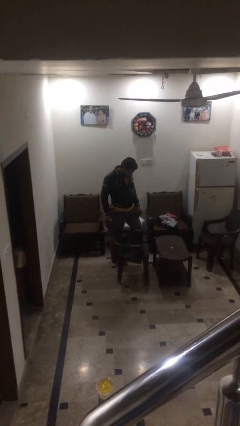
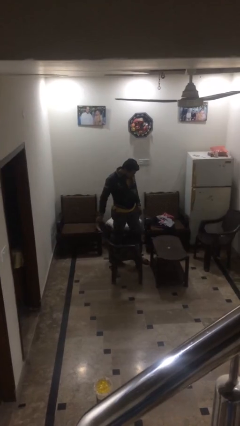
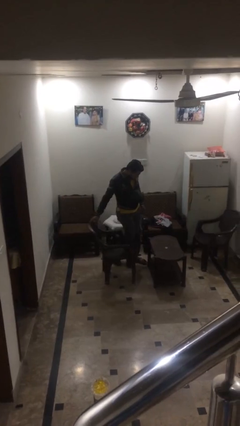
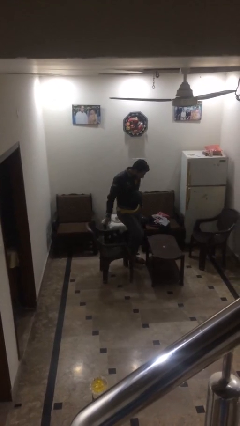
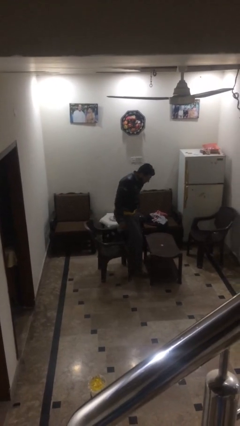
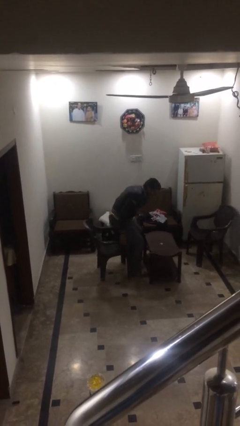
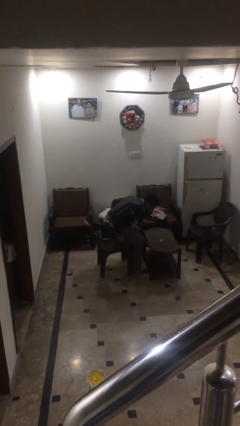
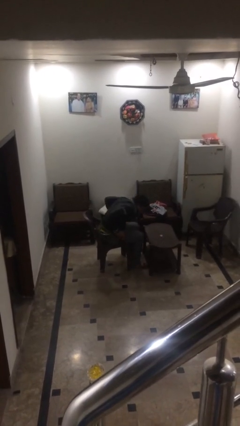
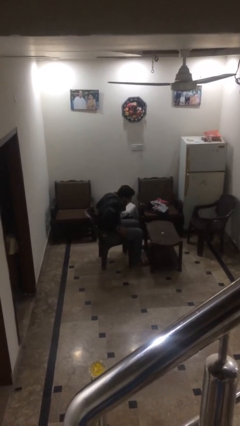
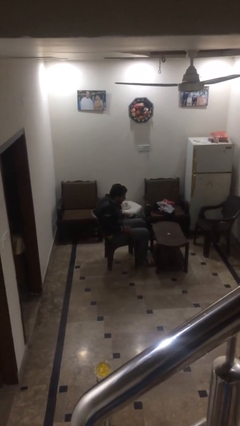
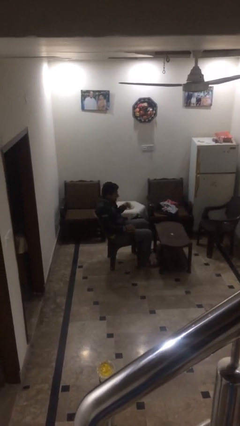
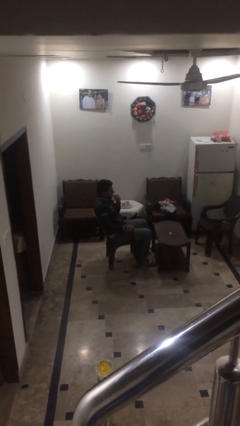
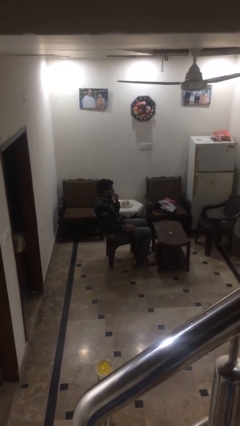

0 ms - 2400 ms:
person sits down

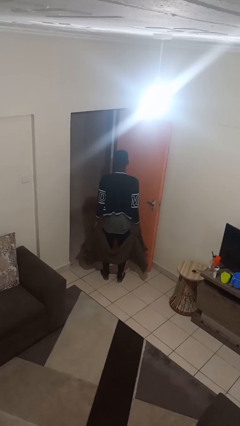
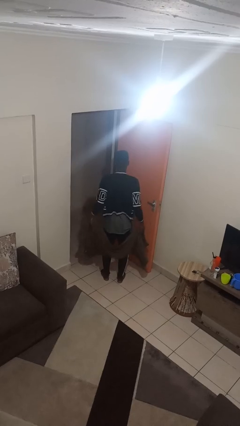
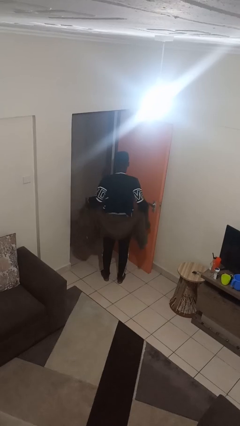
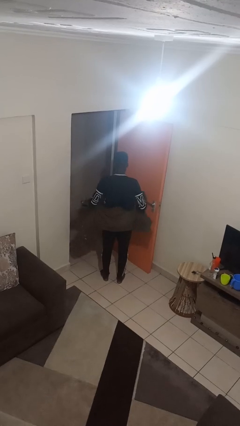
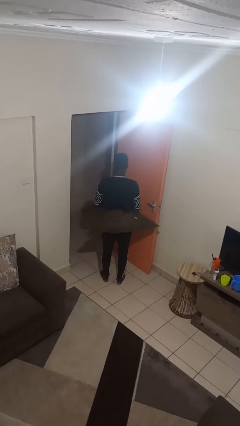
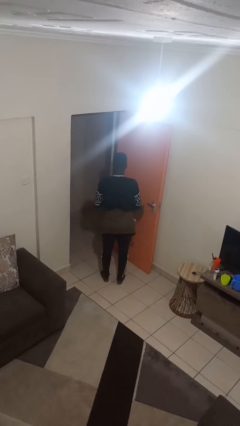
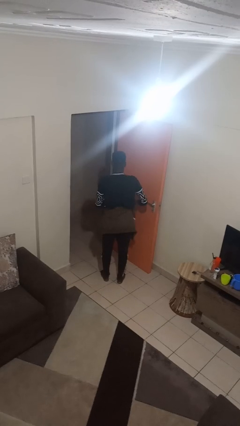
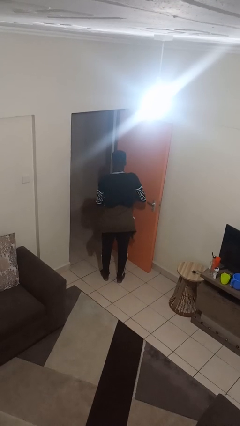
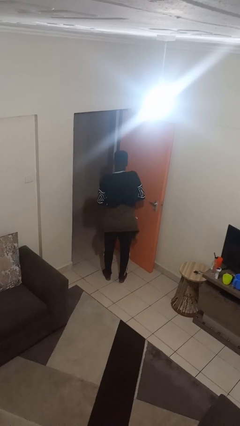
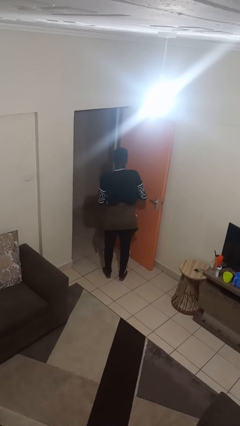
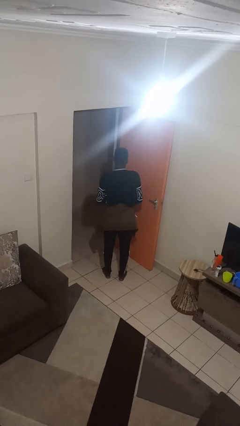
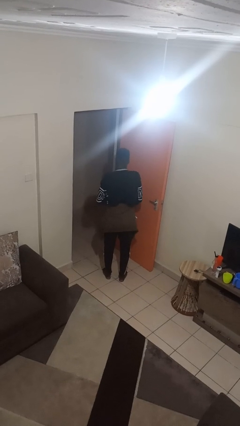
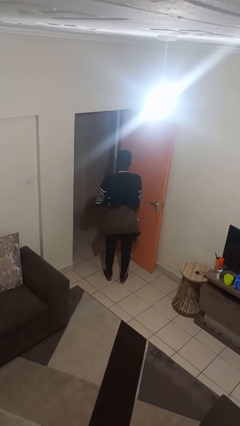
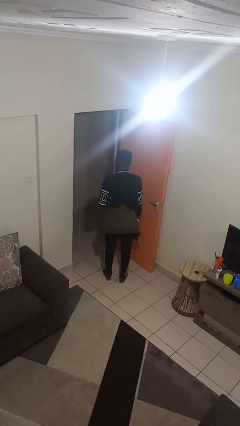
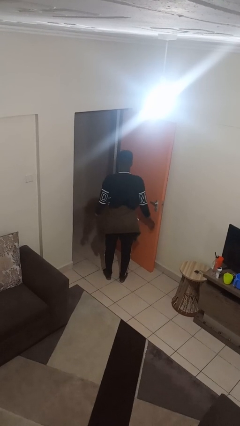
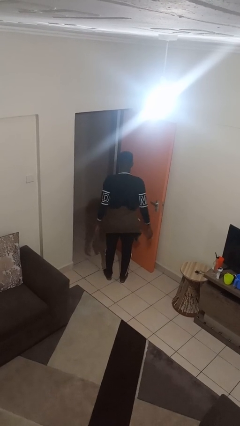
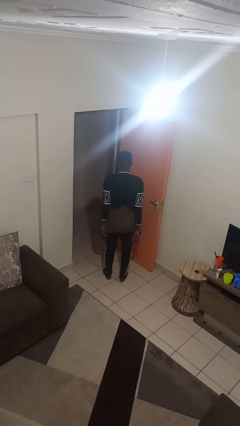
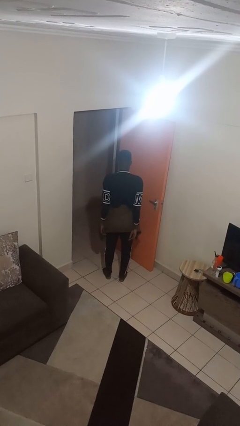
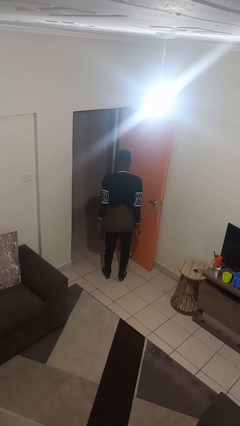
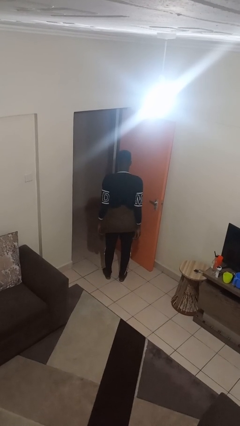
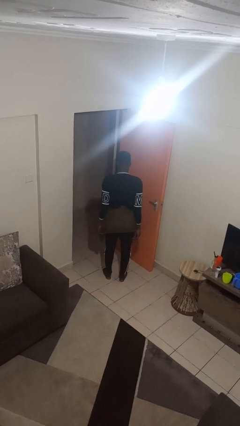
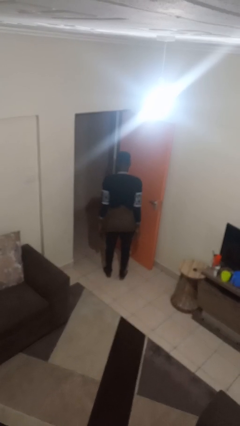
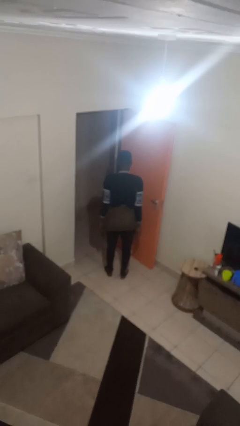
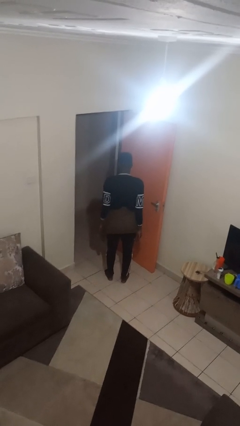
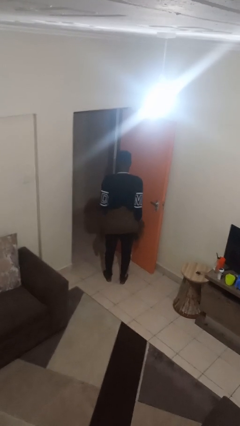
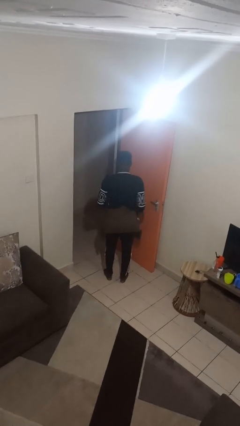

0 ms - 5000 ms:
person ties jacket around waist

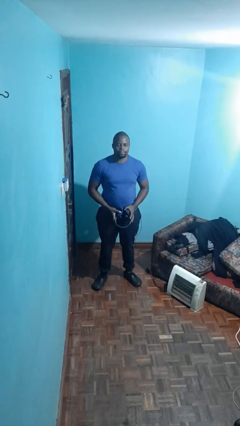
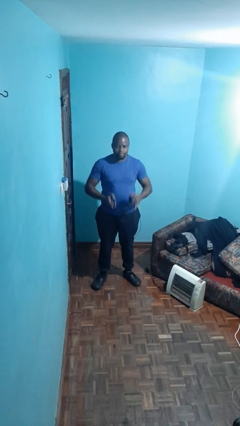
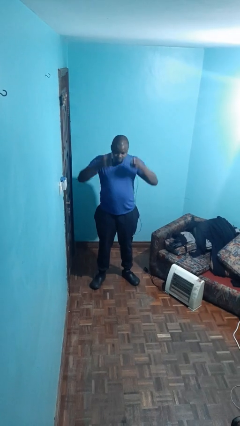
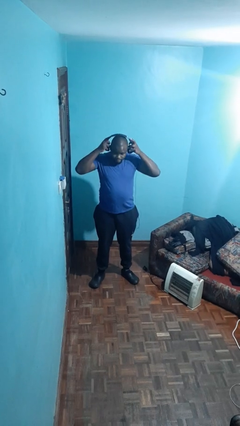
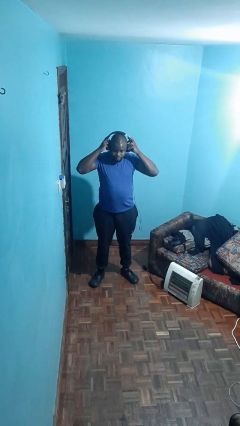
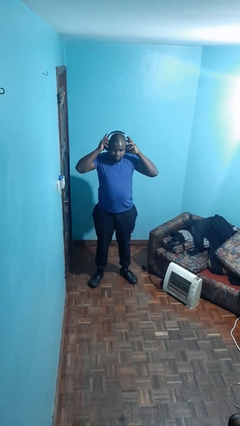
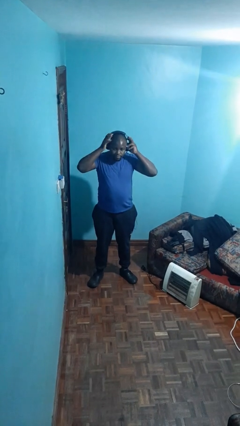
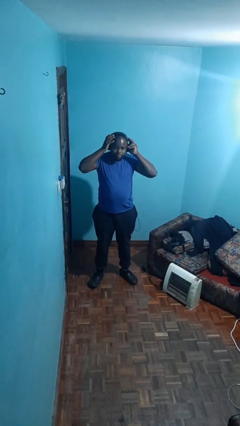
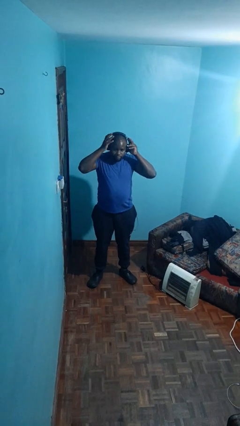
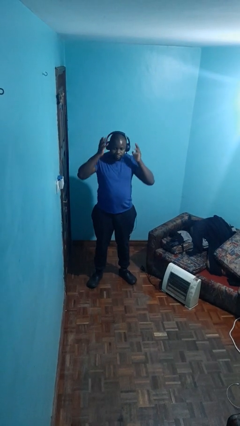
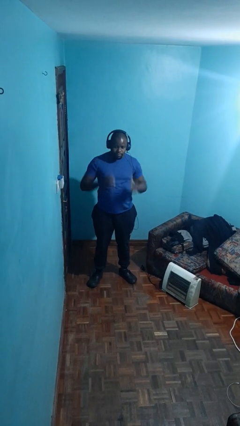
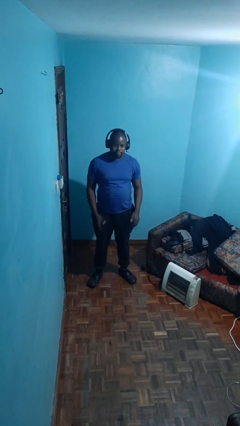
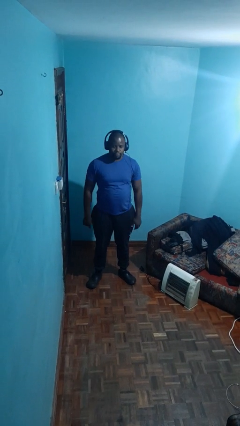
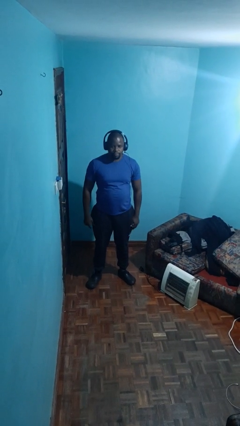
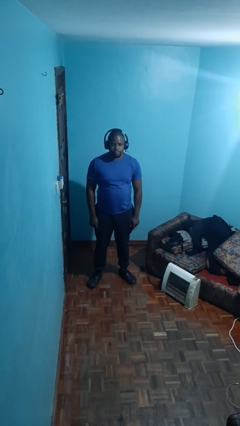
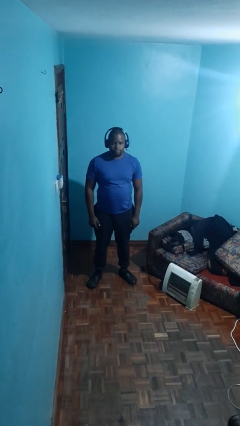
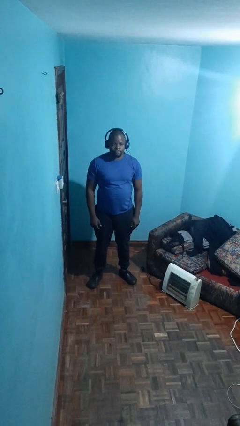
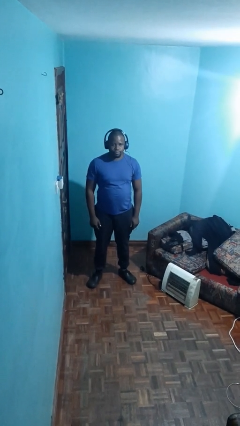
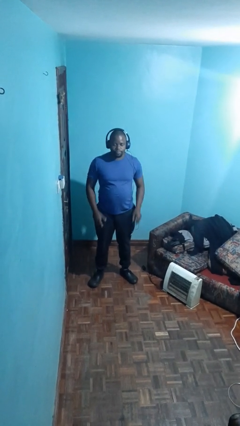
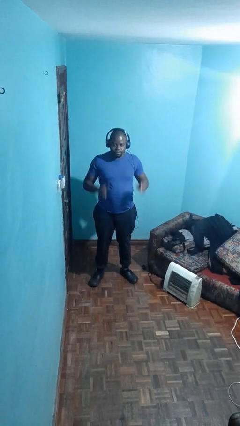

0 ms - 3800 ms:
person puts on headphones

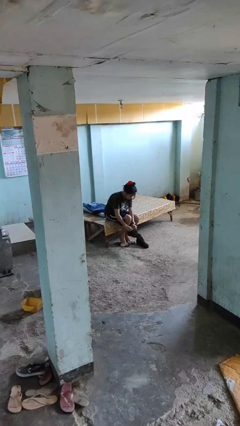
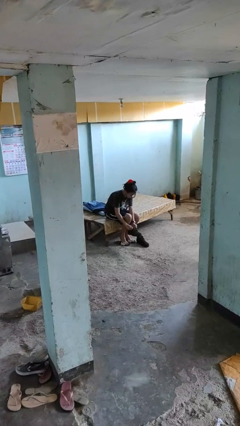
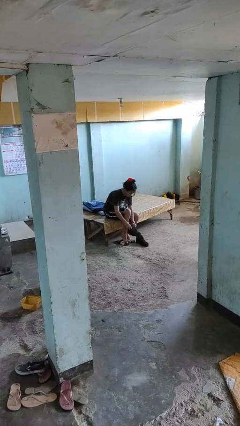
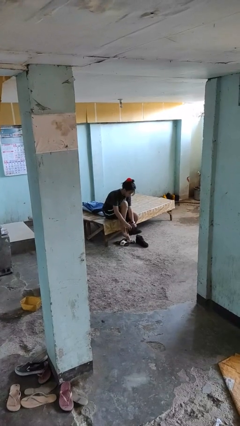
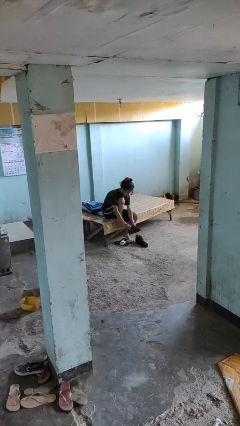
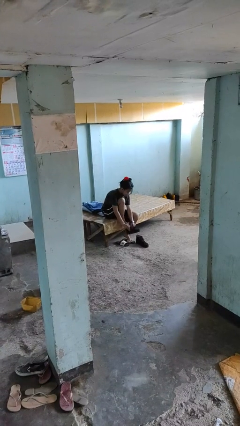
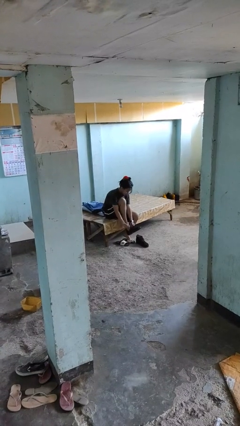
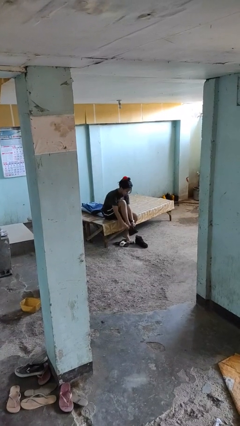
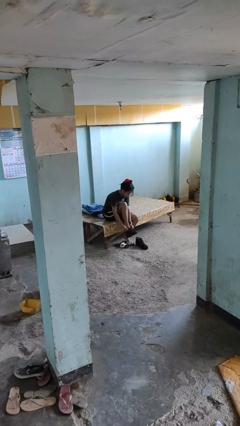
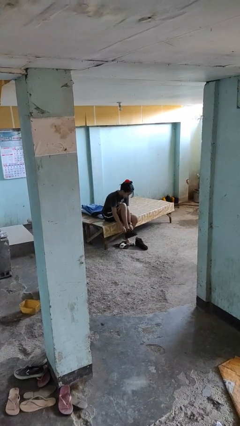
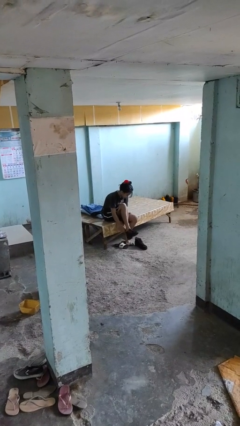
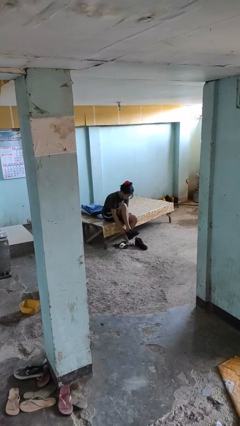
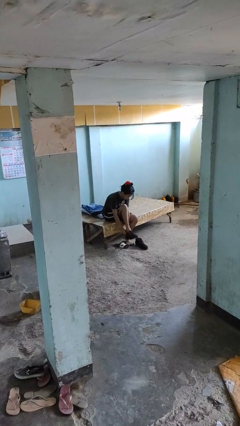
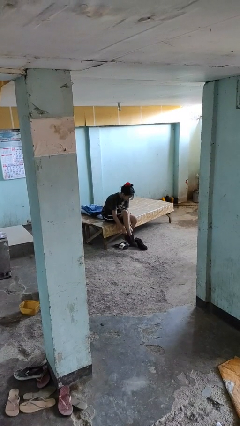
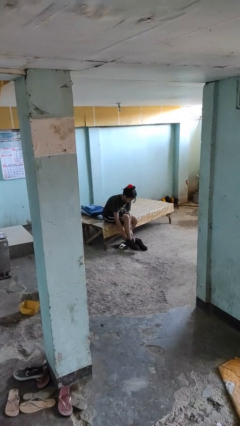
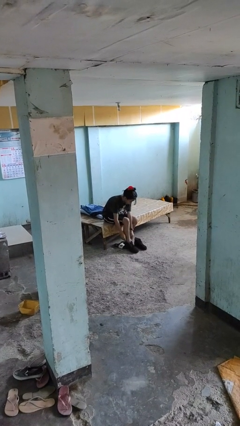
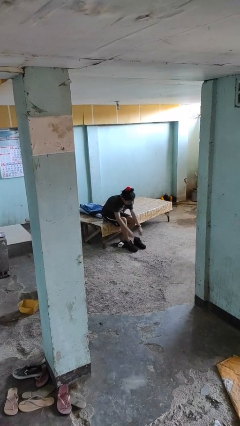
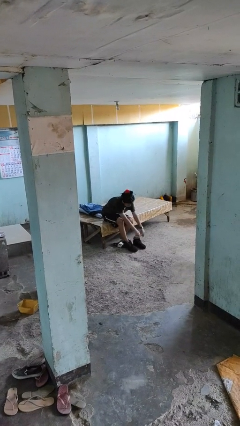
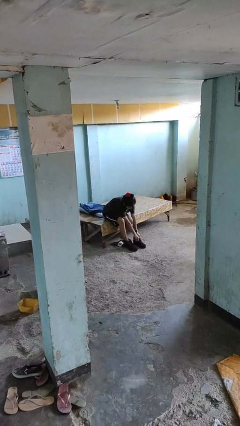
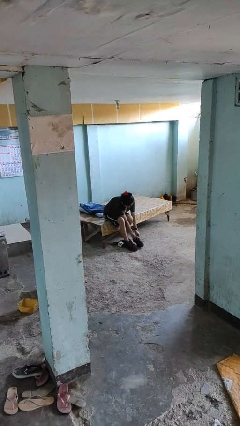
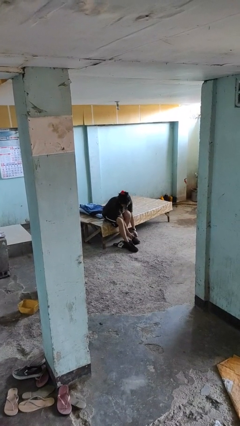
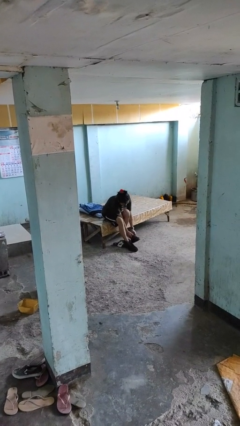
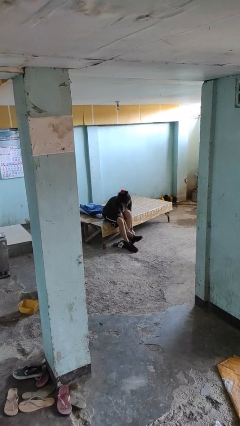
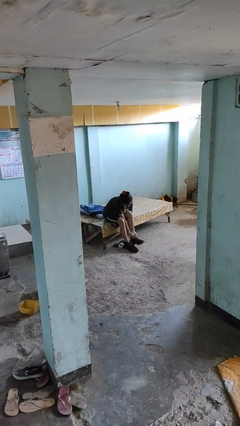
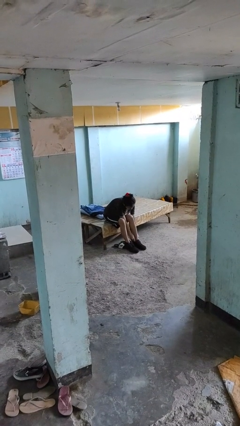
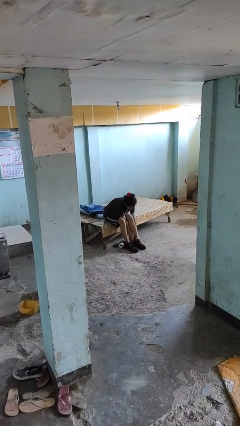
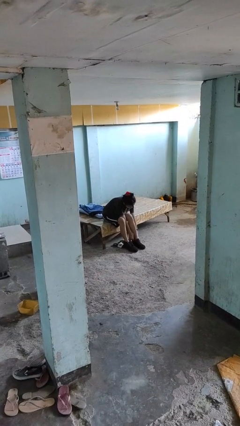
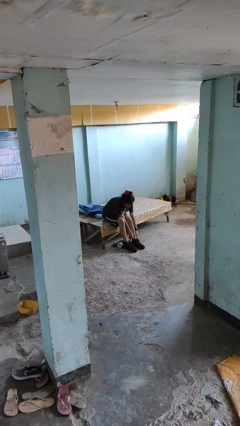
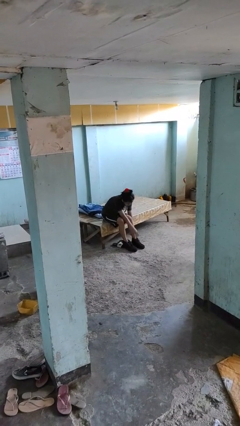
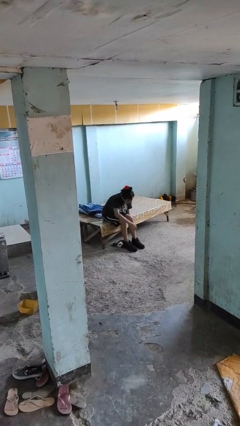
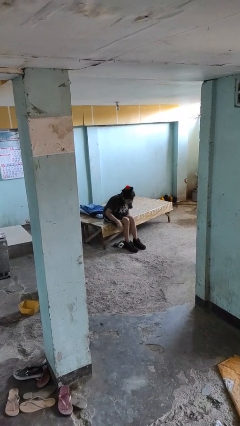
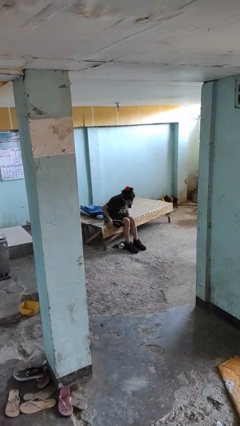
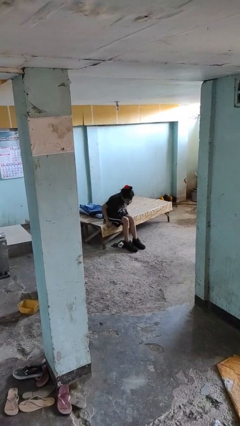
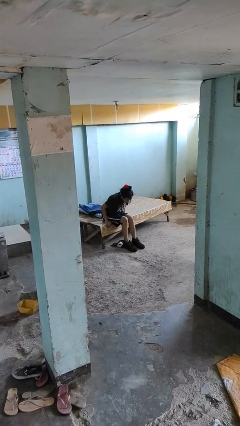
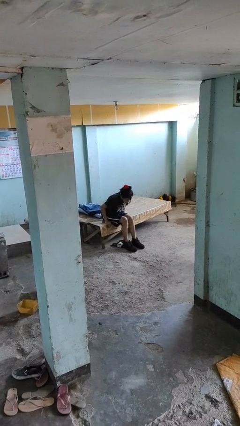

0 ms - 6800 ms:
person puts on boots
